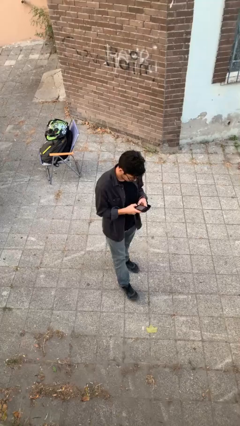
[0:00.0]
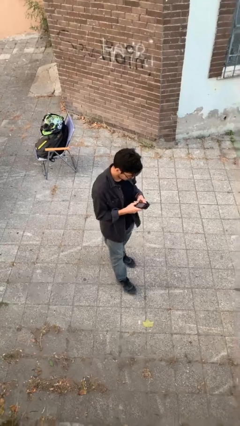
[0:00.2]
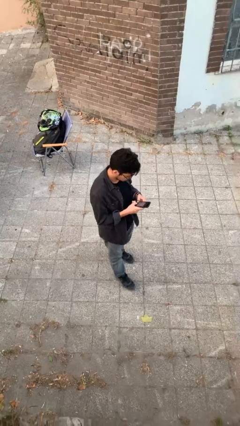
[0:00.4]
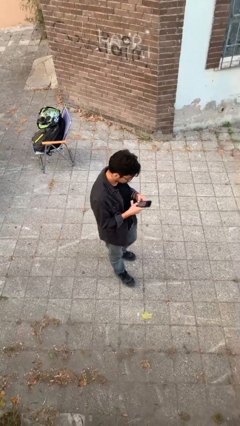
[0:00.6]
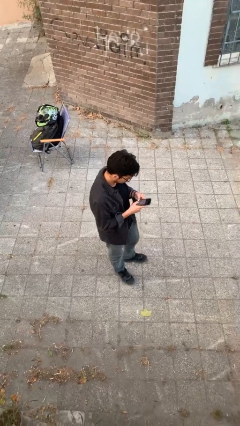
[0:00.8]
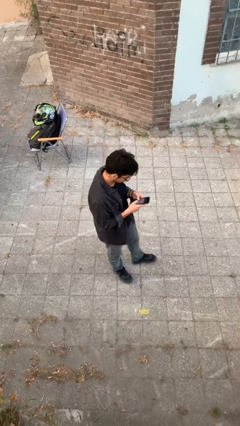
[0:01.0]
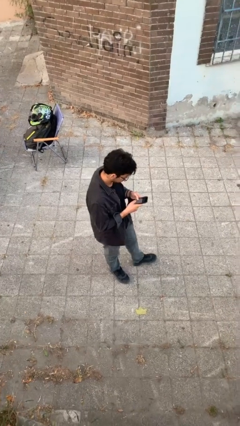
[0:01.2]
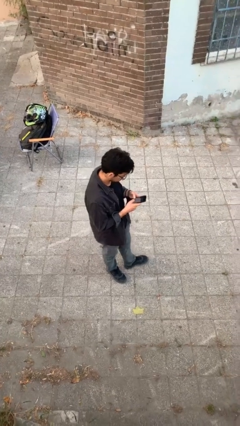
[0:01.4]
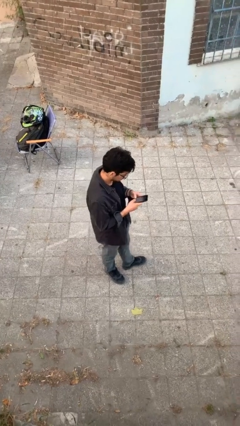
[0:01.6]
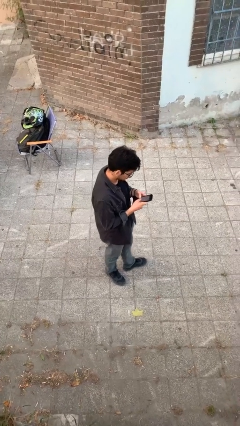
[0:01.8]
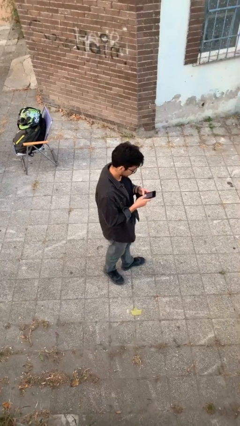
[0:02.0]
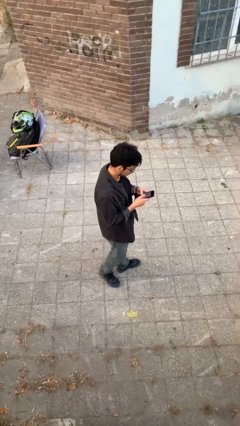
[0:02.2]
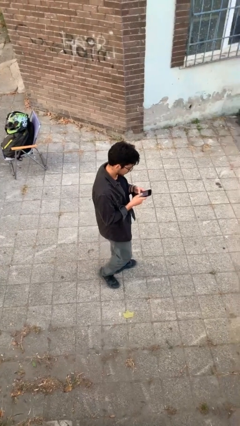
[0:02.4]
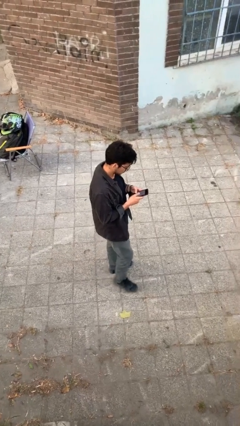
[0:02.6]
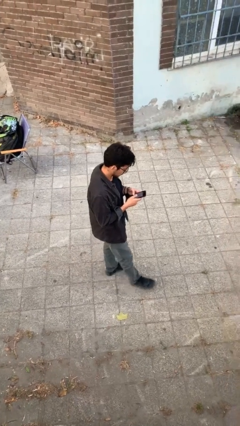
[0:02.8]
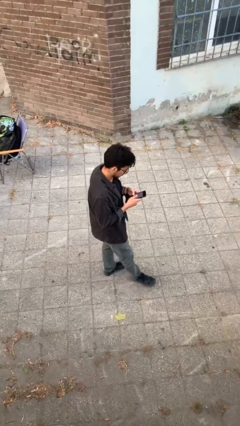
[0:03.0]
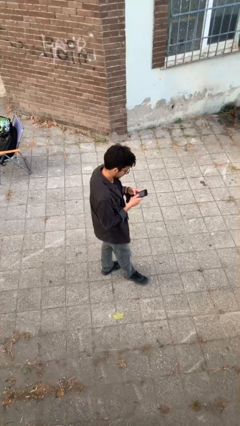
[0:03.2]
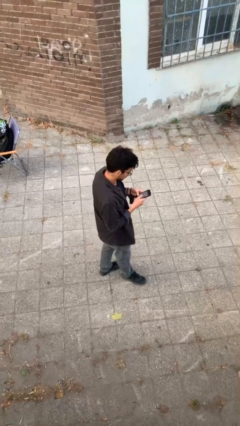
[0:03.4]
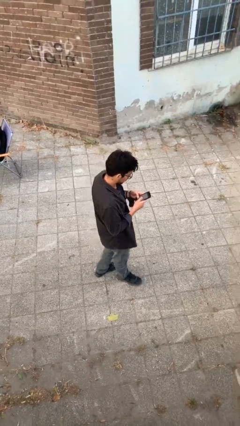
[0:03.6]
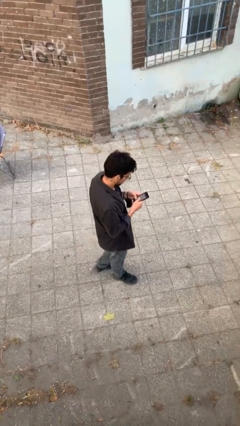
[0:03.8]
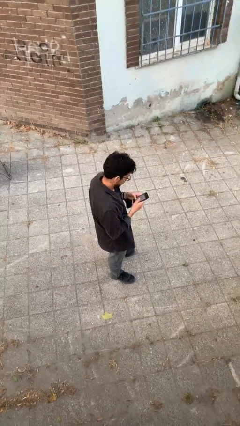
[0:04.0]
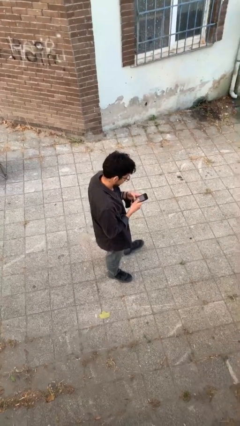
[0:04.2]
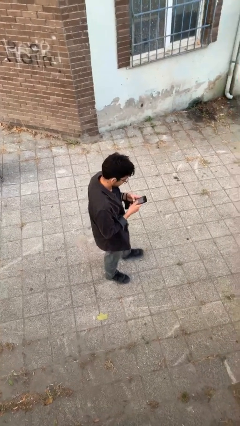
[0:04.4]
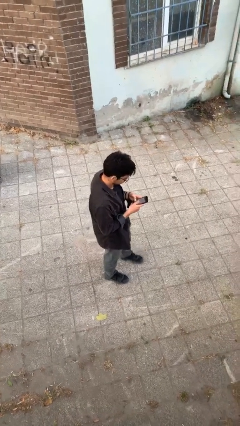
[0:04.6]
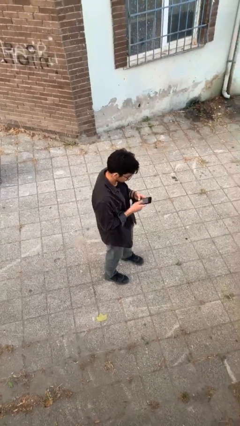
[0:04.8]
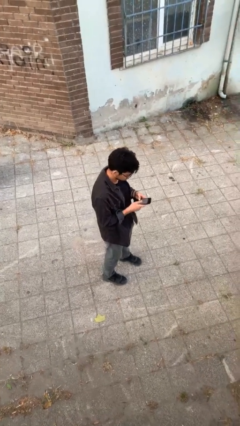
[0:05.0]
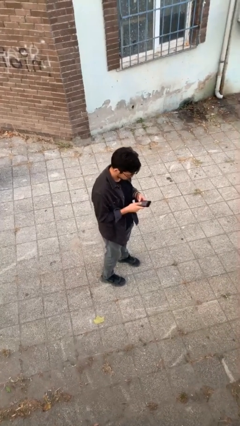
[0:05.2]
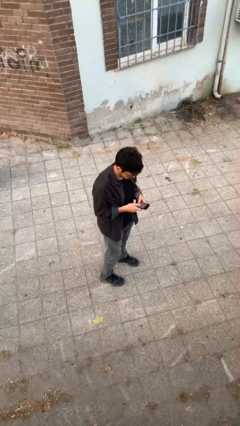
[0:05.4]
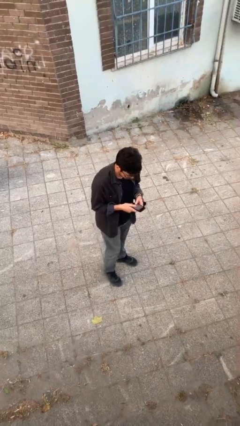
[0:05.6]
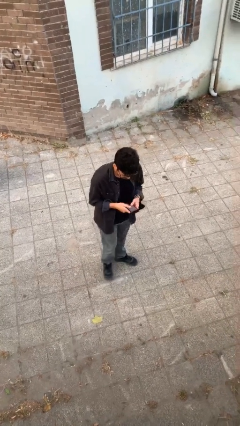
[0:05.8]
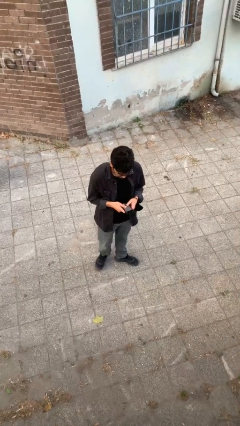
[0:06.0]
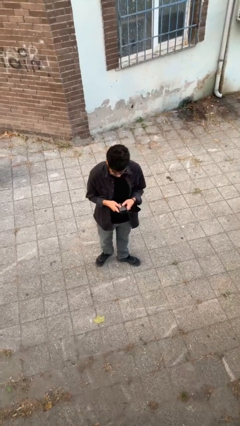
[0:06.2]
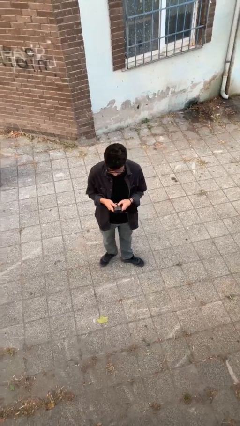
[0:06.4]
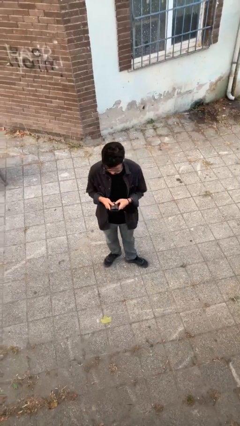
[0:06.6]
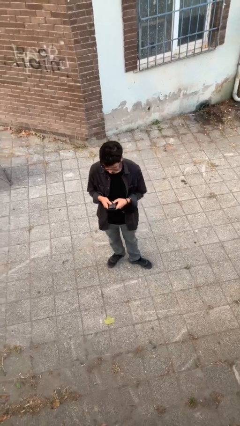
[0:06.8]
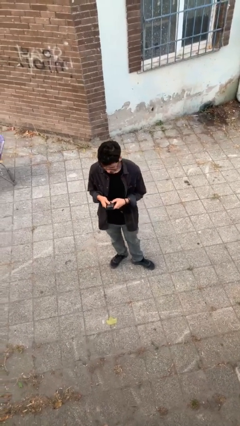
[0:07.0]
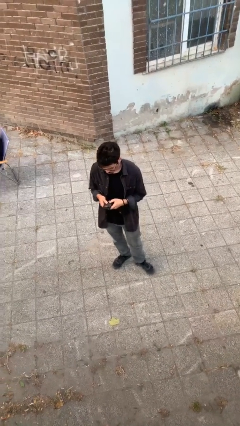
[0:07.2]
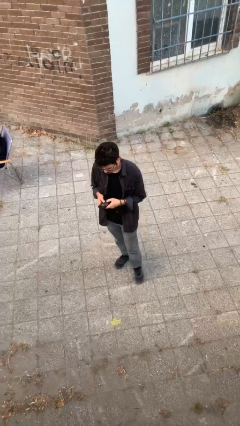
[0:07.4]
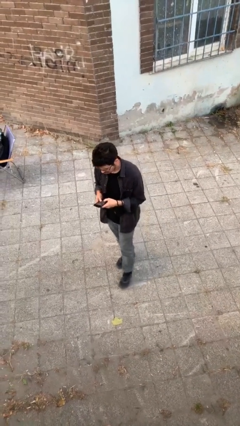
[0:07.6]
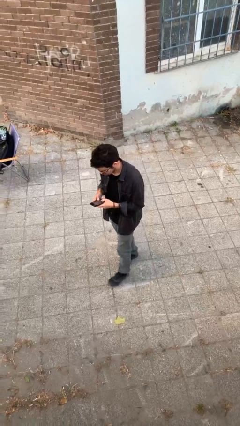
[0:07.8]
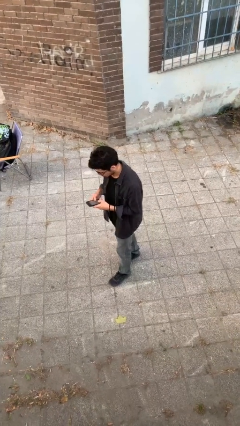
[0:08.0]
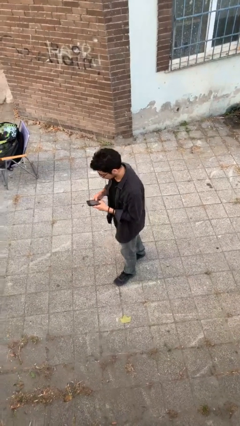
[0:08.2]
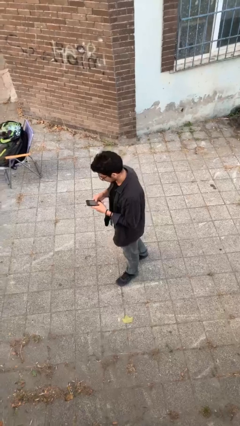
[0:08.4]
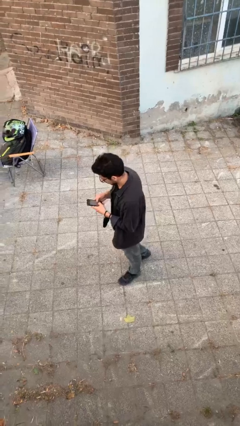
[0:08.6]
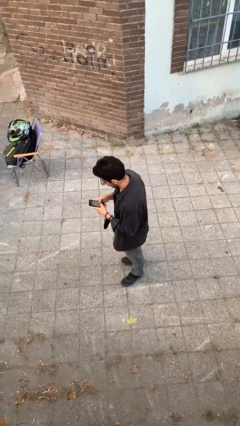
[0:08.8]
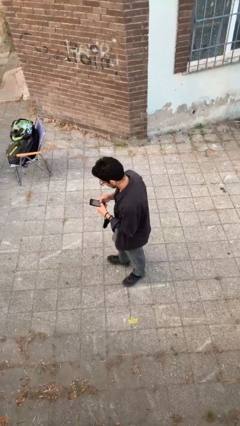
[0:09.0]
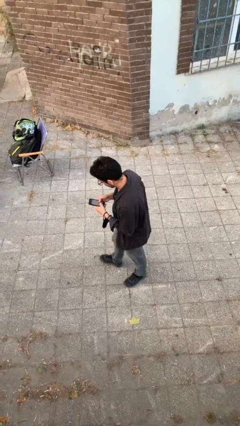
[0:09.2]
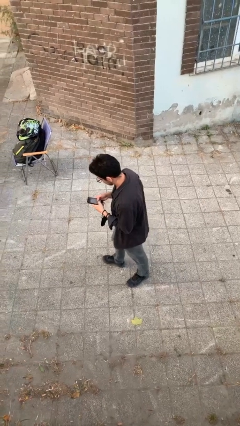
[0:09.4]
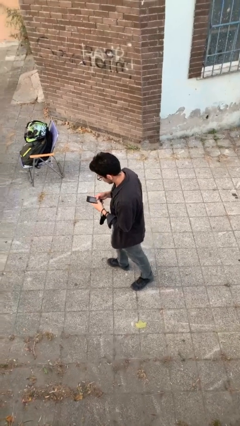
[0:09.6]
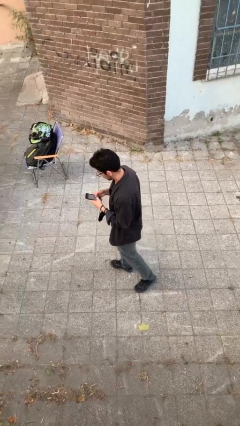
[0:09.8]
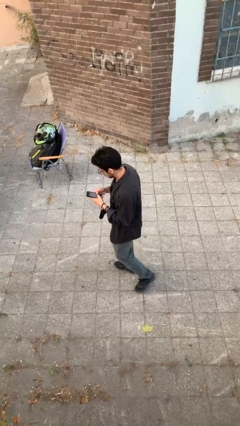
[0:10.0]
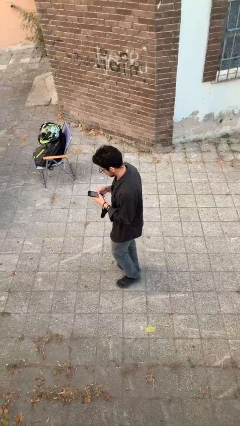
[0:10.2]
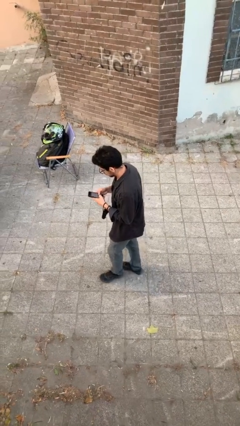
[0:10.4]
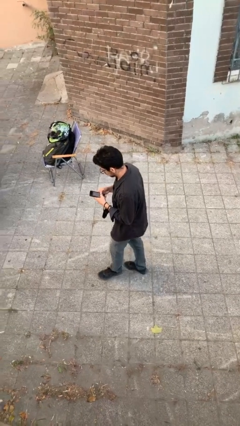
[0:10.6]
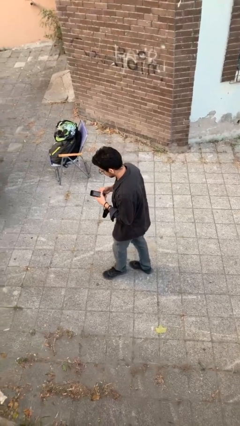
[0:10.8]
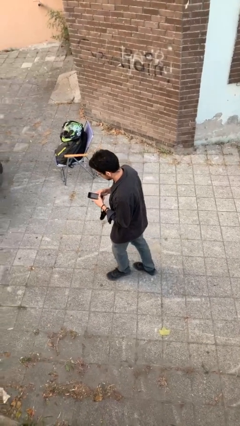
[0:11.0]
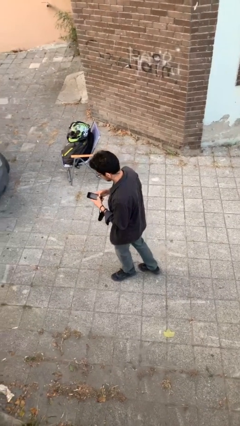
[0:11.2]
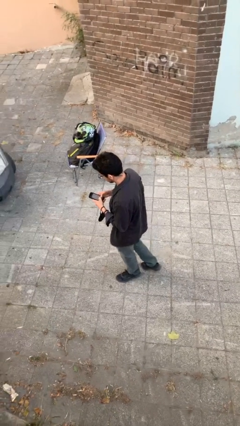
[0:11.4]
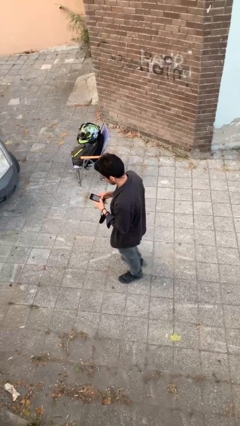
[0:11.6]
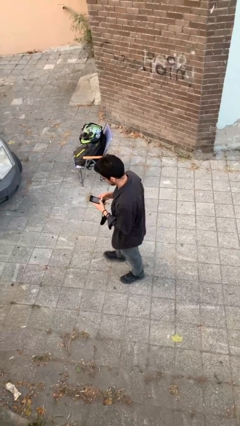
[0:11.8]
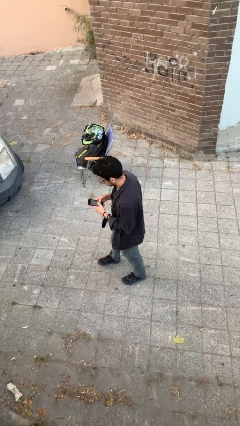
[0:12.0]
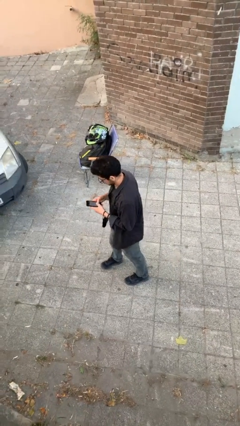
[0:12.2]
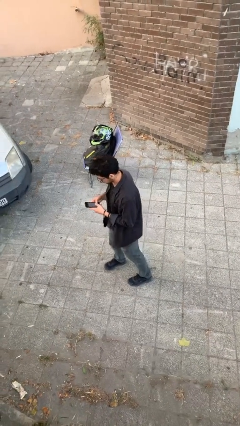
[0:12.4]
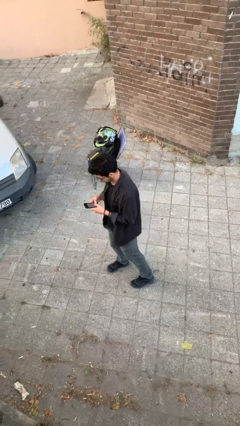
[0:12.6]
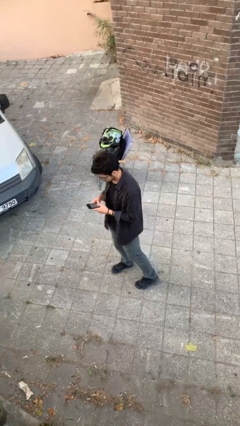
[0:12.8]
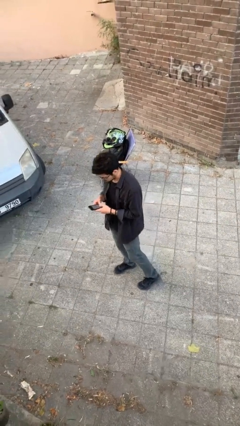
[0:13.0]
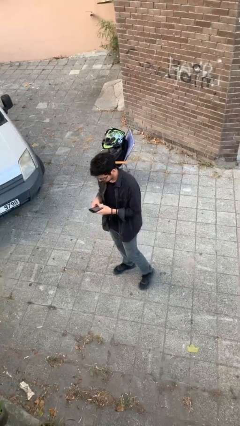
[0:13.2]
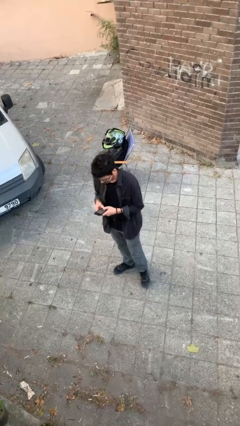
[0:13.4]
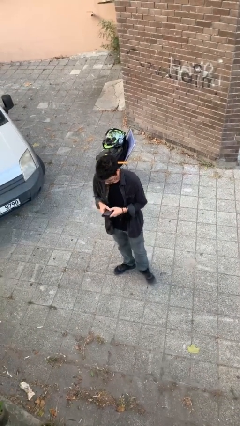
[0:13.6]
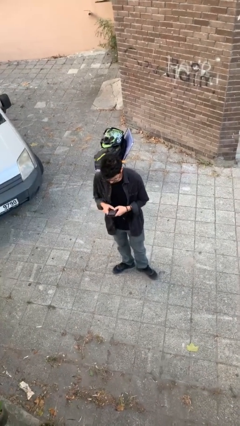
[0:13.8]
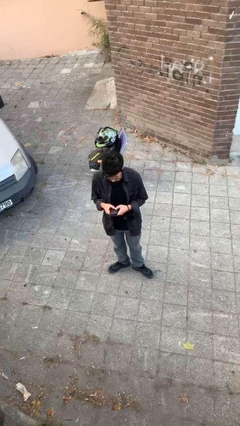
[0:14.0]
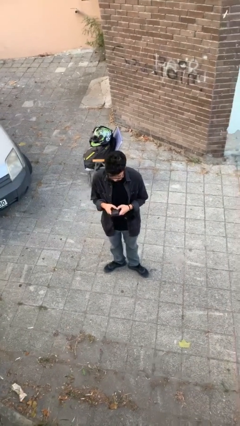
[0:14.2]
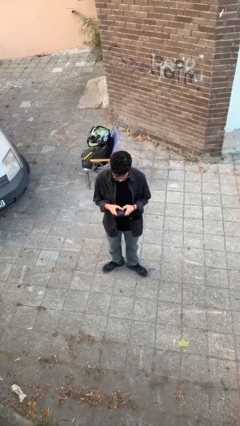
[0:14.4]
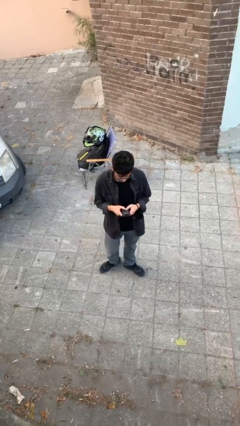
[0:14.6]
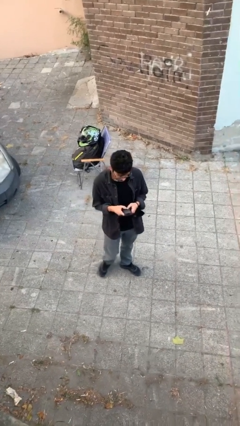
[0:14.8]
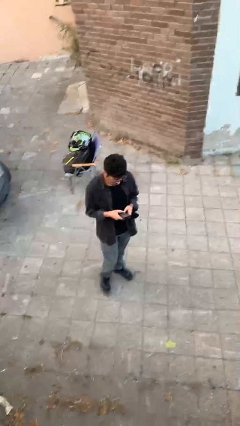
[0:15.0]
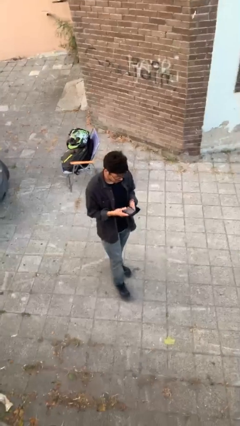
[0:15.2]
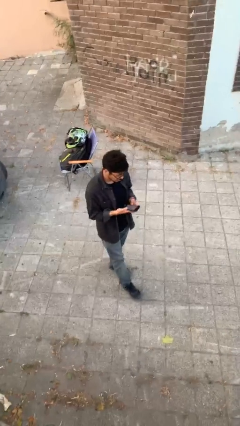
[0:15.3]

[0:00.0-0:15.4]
person texts on phone

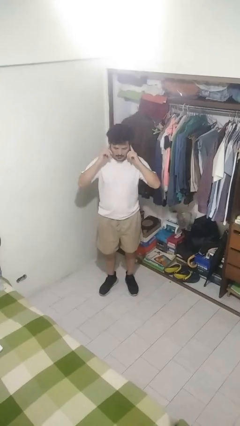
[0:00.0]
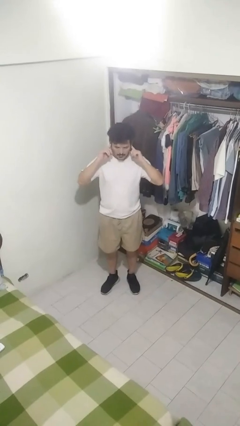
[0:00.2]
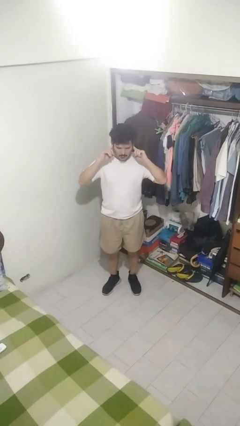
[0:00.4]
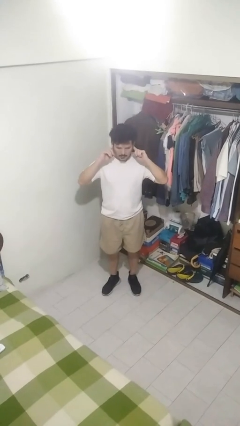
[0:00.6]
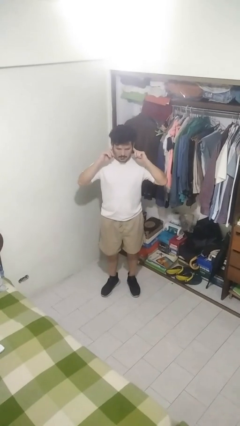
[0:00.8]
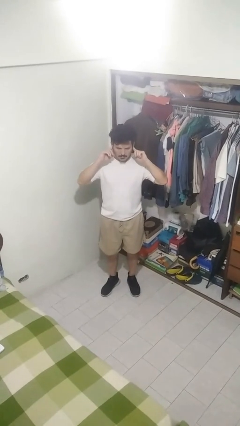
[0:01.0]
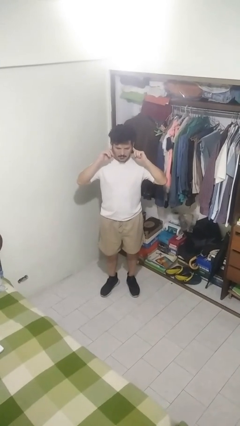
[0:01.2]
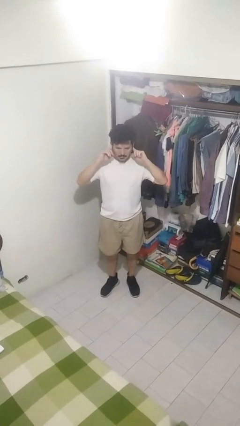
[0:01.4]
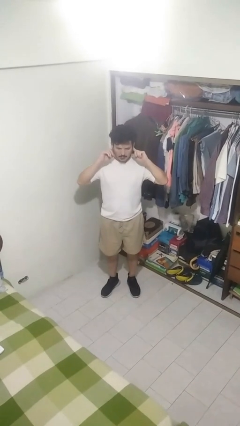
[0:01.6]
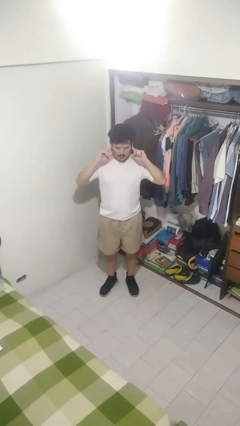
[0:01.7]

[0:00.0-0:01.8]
person puts fingers in ear

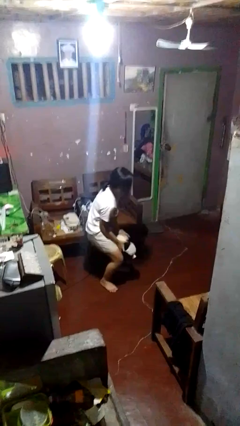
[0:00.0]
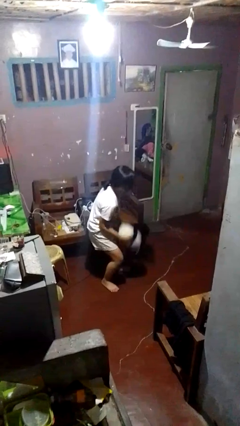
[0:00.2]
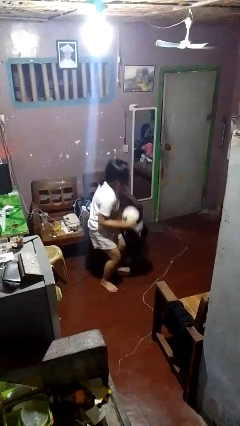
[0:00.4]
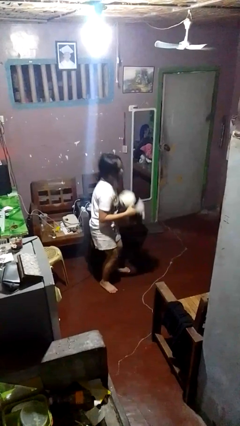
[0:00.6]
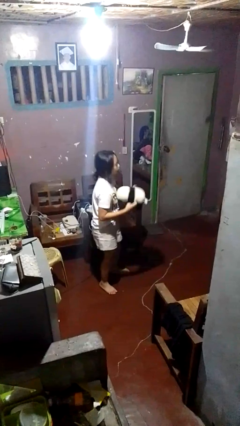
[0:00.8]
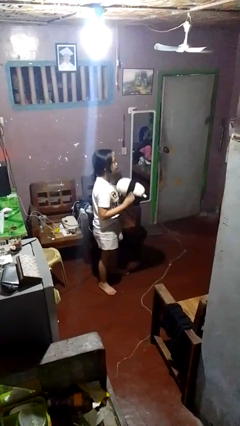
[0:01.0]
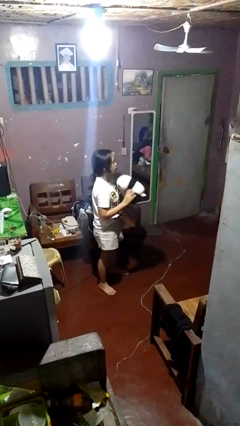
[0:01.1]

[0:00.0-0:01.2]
person catches dropped object
